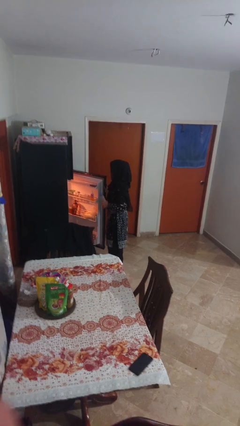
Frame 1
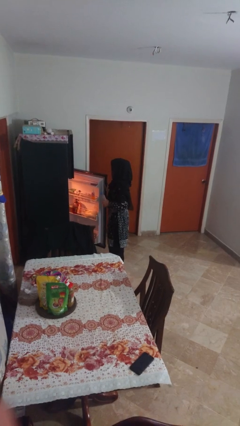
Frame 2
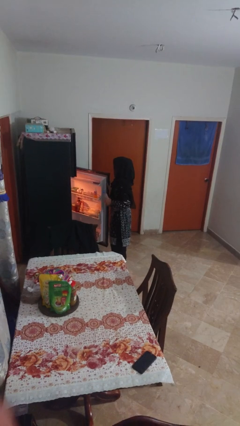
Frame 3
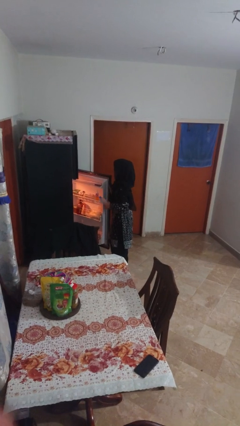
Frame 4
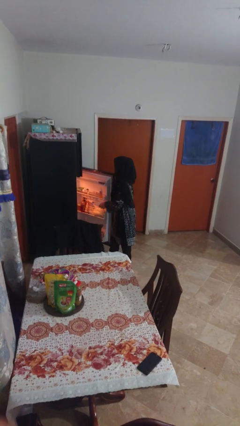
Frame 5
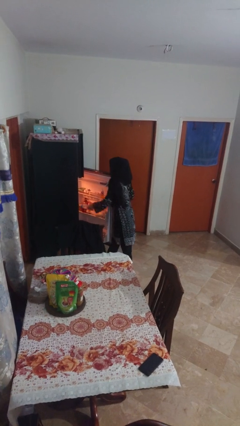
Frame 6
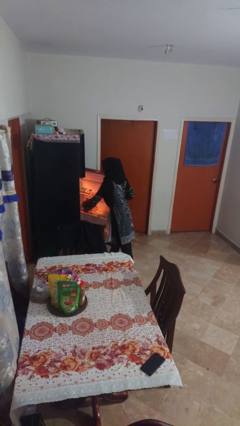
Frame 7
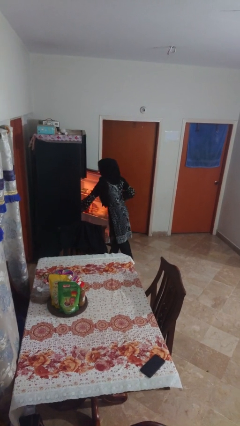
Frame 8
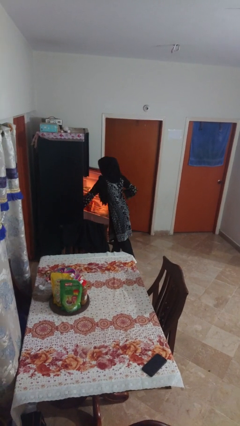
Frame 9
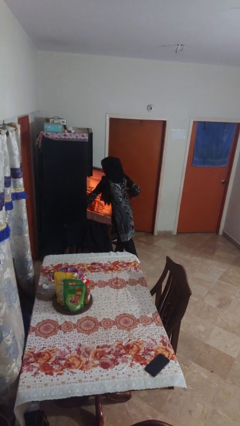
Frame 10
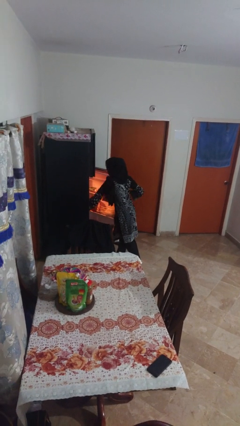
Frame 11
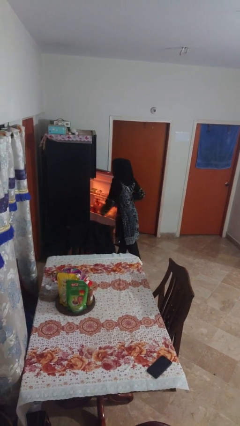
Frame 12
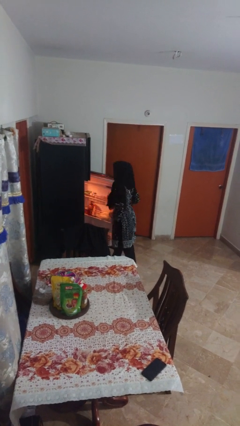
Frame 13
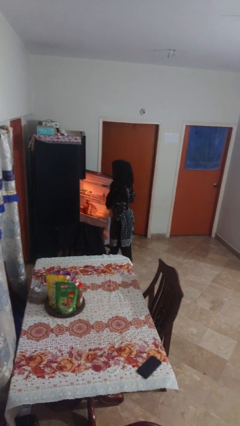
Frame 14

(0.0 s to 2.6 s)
person puts object into refrigerator

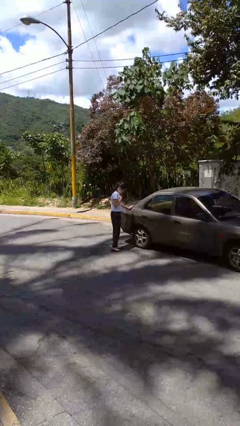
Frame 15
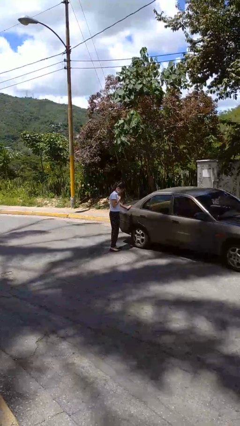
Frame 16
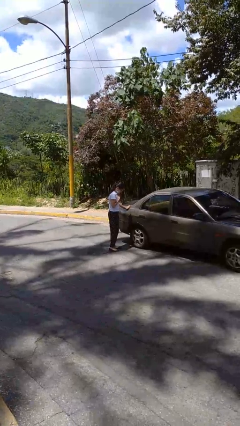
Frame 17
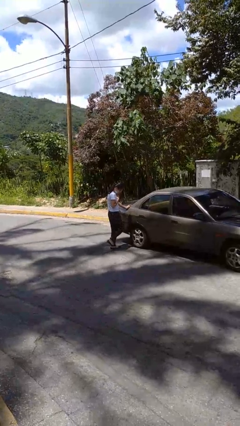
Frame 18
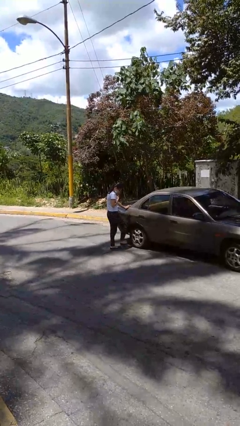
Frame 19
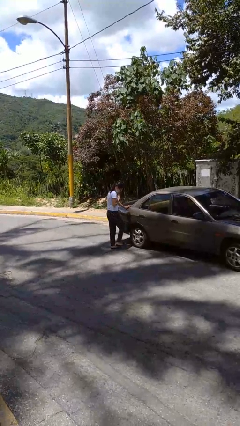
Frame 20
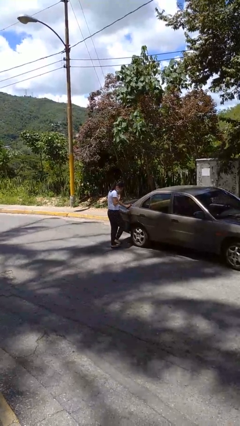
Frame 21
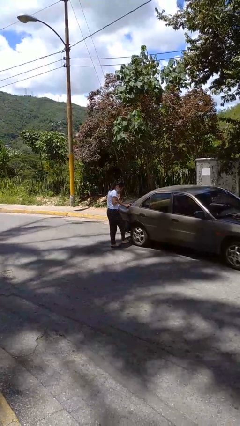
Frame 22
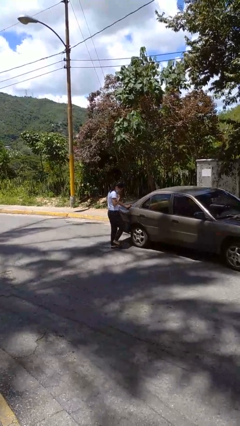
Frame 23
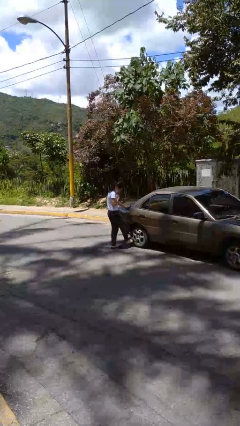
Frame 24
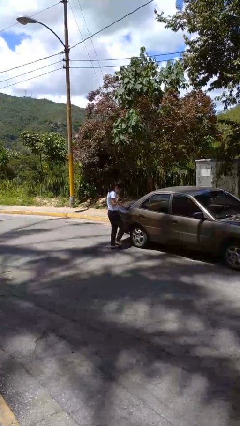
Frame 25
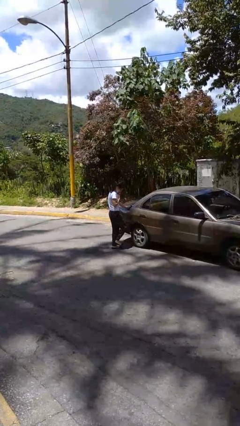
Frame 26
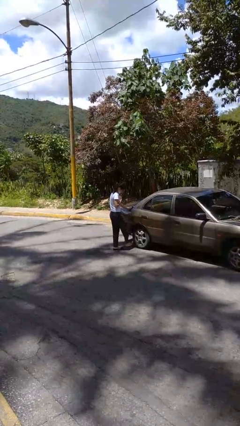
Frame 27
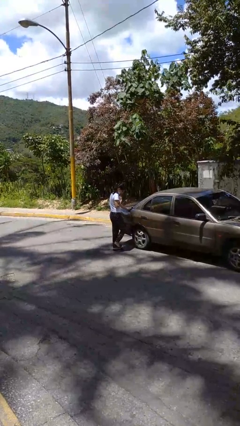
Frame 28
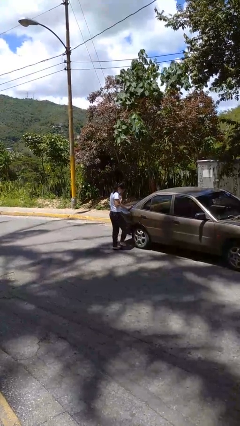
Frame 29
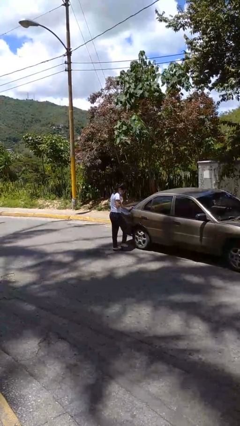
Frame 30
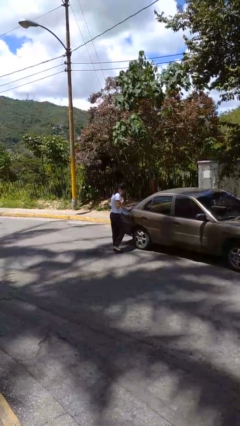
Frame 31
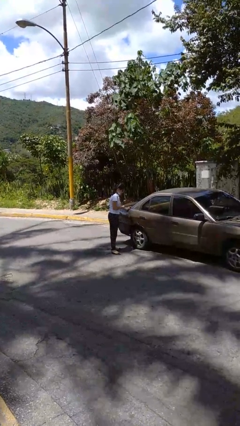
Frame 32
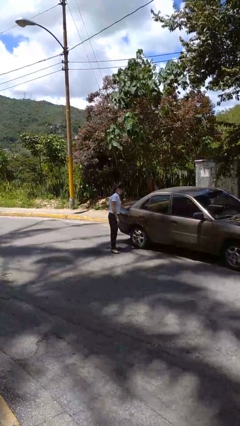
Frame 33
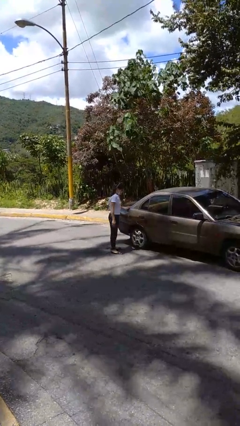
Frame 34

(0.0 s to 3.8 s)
person kicks car tires

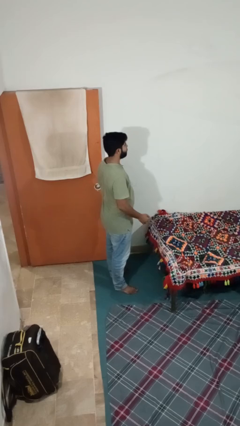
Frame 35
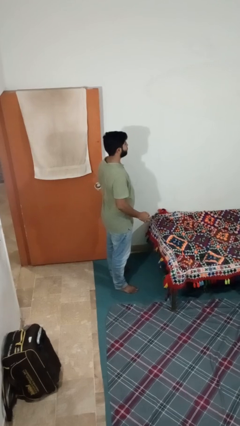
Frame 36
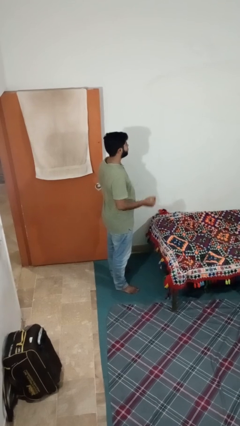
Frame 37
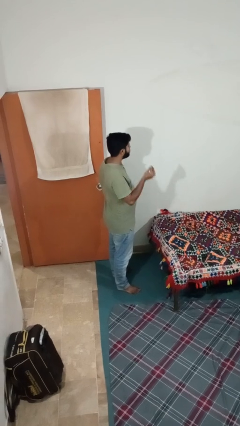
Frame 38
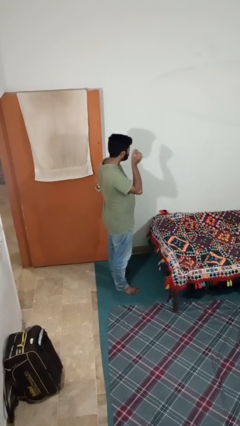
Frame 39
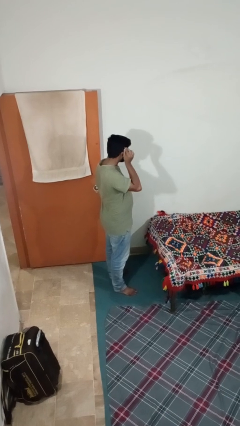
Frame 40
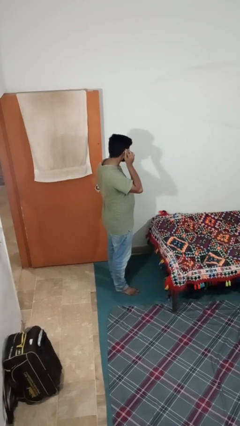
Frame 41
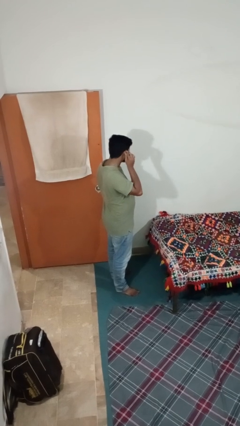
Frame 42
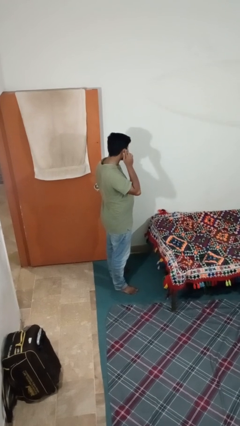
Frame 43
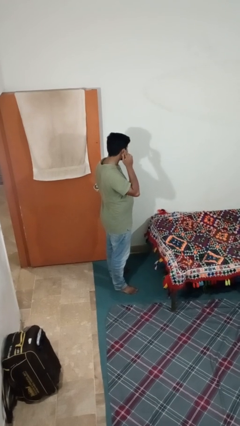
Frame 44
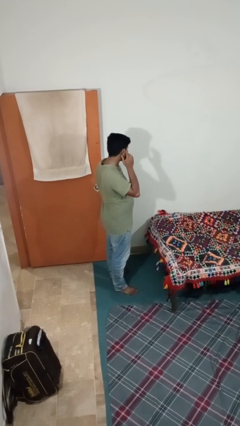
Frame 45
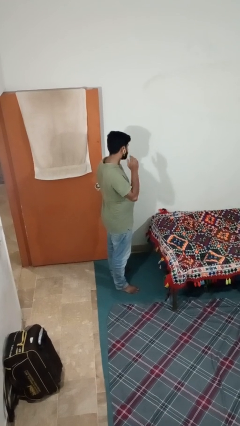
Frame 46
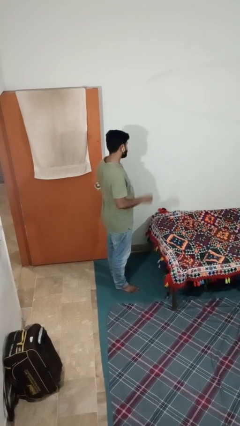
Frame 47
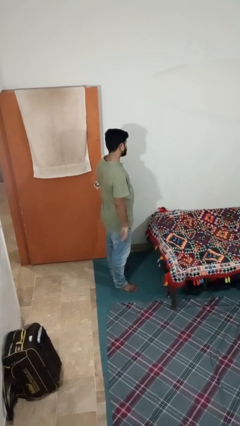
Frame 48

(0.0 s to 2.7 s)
person puts on earrings

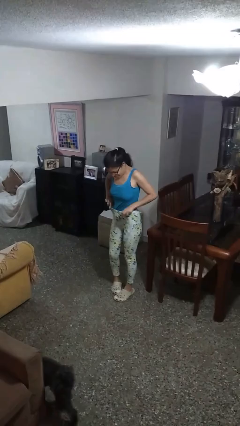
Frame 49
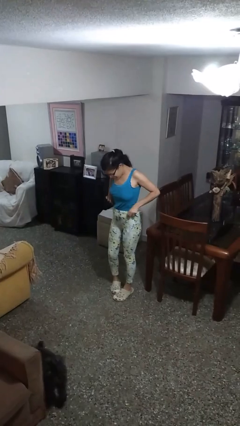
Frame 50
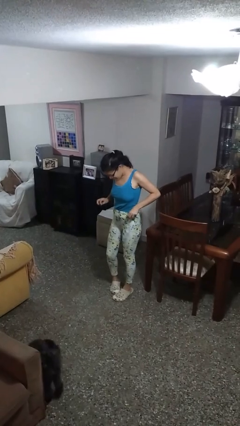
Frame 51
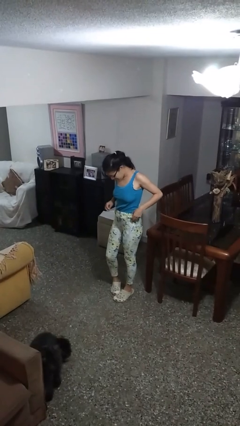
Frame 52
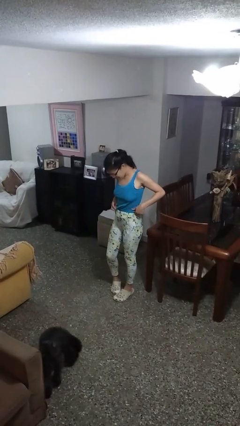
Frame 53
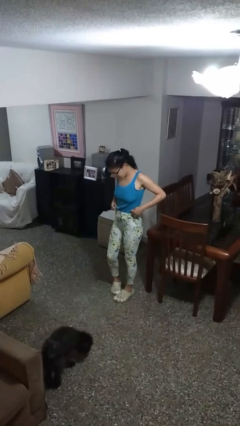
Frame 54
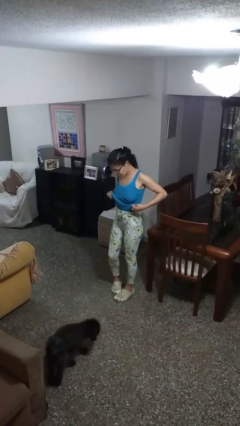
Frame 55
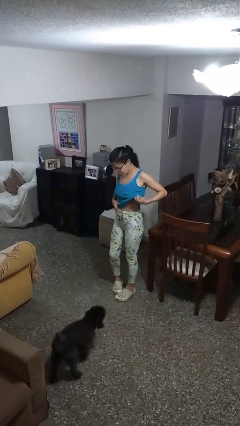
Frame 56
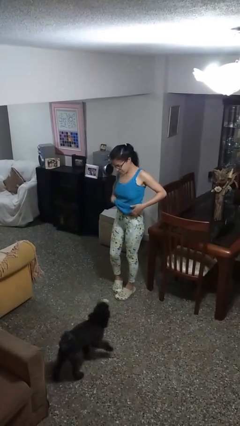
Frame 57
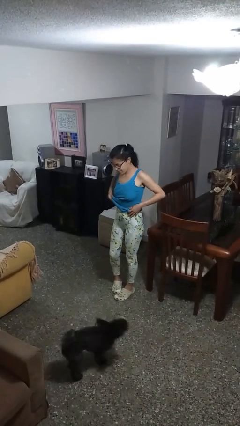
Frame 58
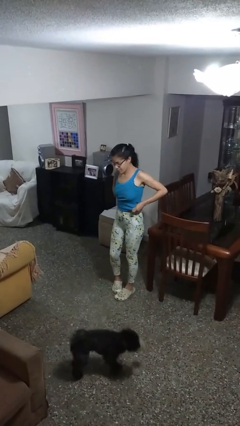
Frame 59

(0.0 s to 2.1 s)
person untucks shirt

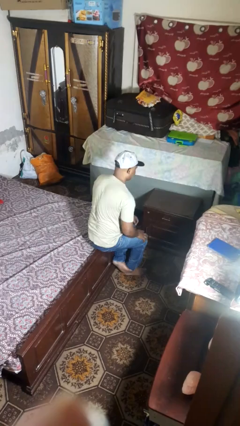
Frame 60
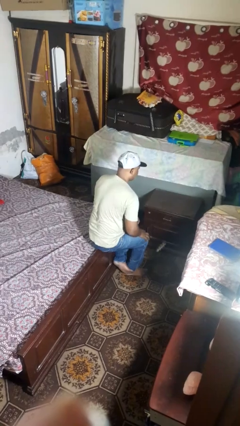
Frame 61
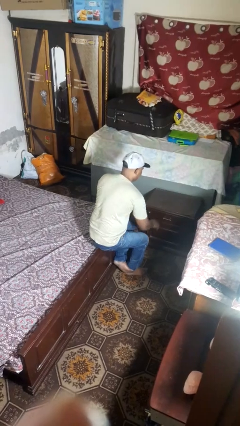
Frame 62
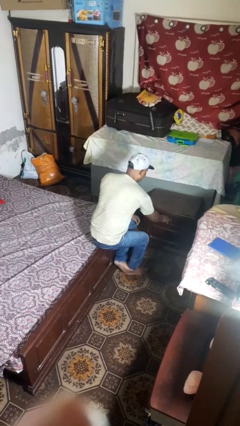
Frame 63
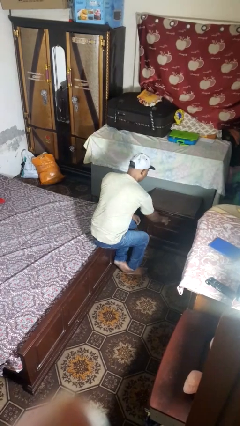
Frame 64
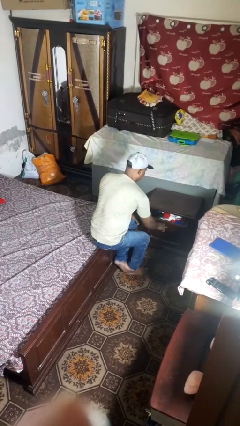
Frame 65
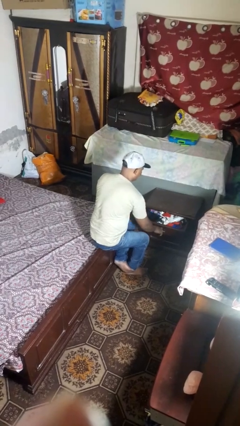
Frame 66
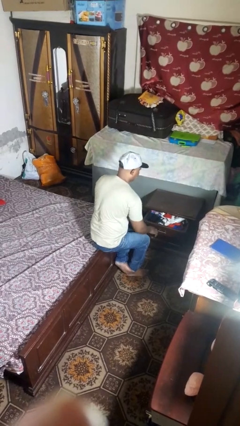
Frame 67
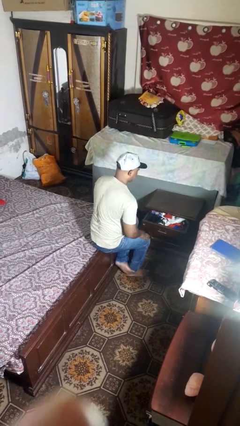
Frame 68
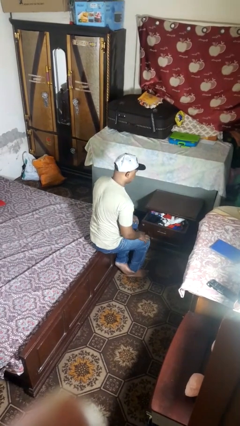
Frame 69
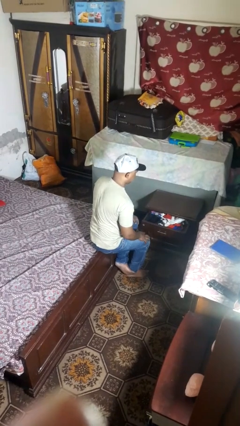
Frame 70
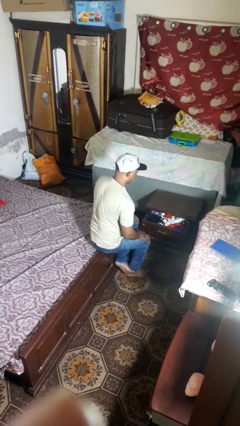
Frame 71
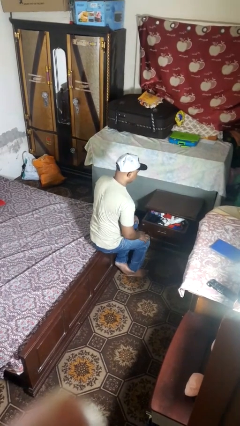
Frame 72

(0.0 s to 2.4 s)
person opens dresser drawer

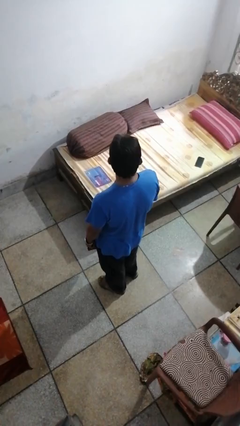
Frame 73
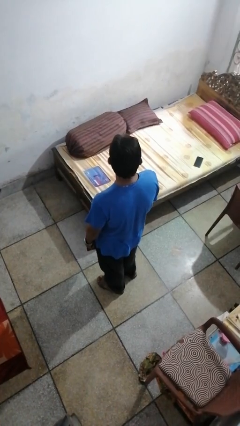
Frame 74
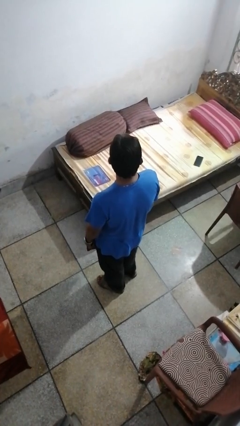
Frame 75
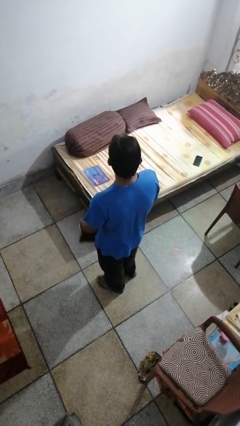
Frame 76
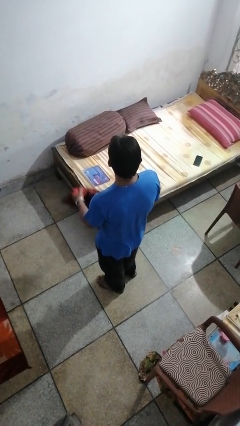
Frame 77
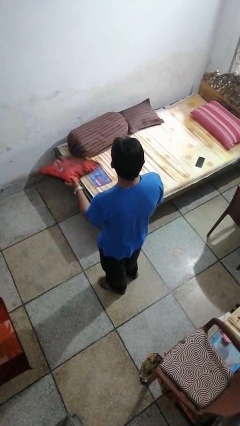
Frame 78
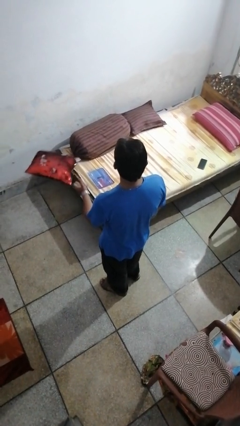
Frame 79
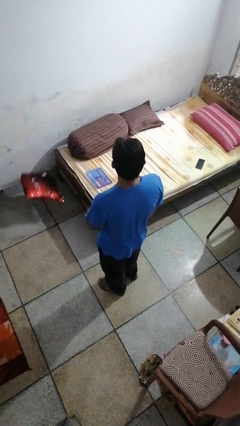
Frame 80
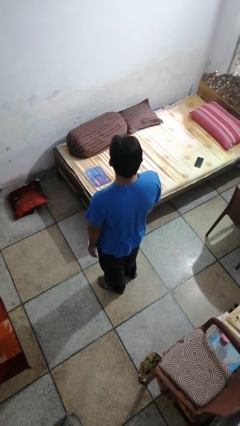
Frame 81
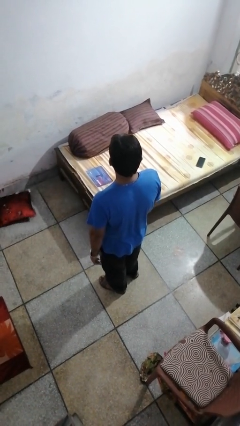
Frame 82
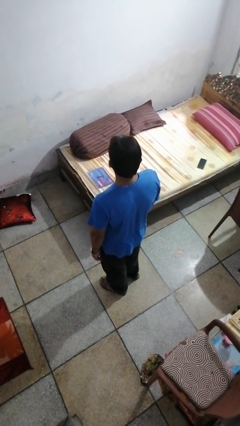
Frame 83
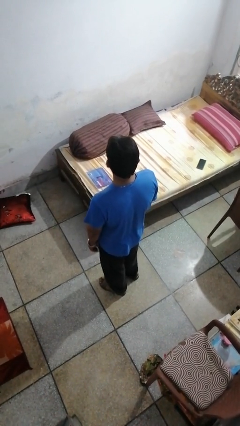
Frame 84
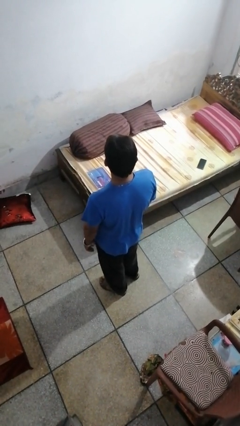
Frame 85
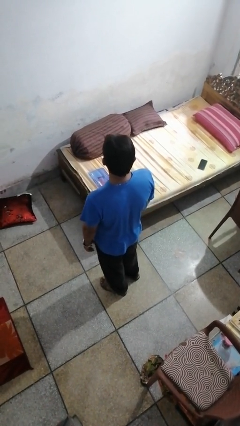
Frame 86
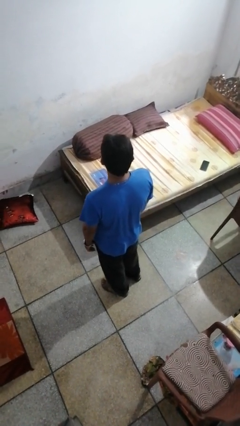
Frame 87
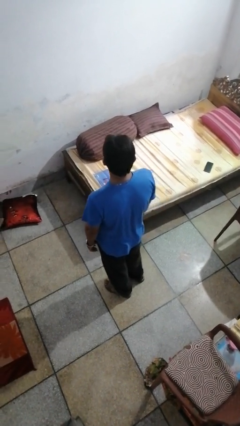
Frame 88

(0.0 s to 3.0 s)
person throws object to ground

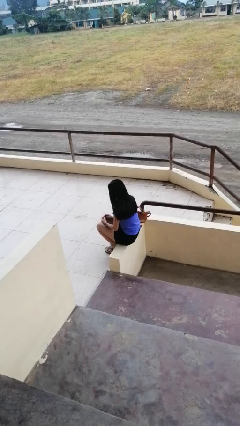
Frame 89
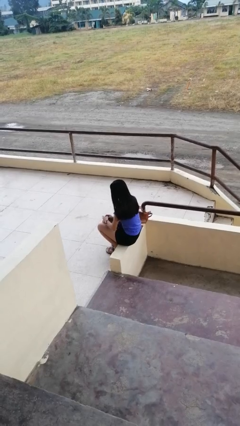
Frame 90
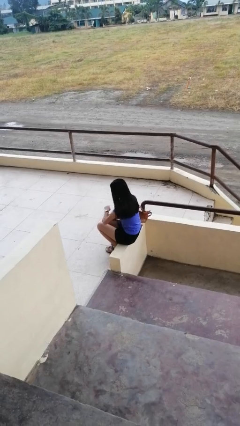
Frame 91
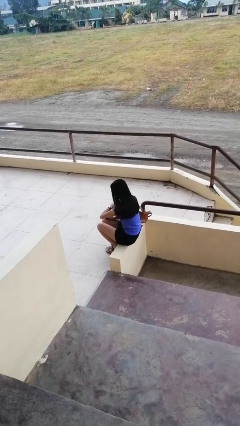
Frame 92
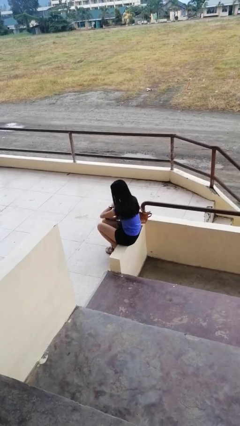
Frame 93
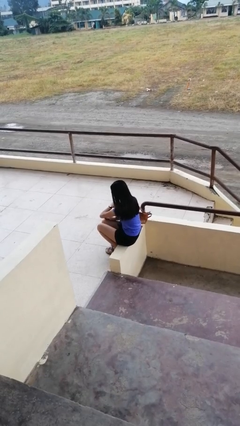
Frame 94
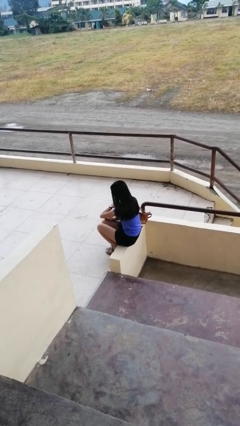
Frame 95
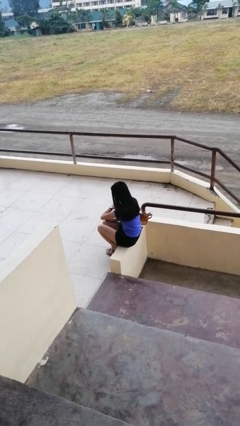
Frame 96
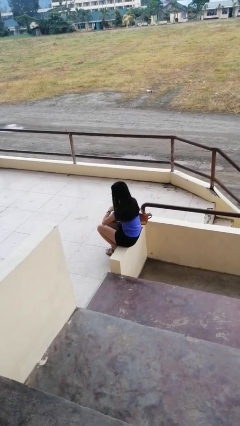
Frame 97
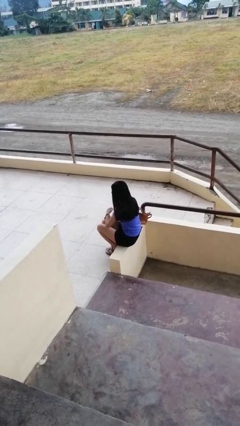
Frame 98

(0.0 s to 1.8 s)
person looks at wristwatch
